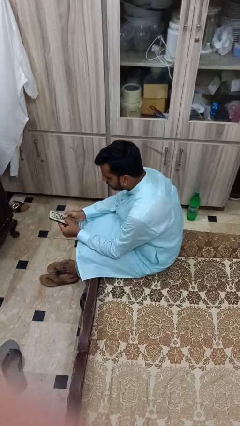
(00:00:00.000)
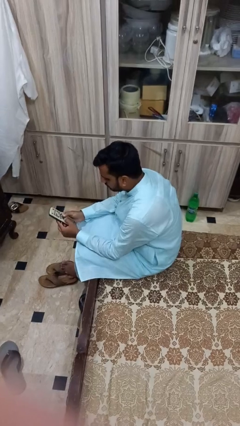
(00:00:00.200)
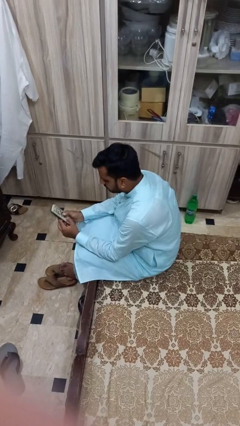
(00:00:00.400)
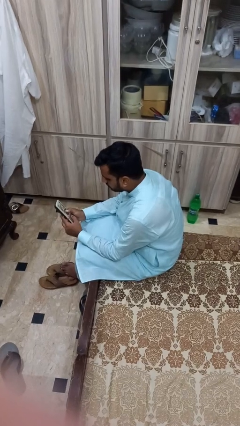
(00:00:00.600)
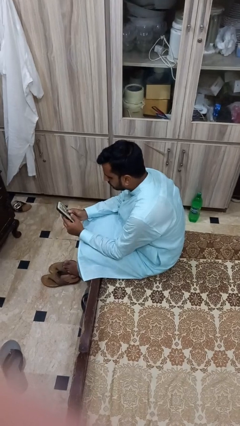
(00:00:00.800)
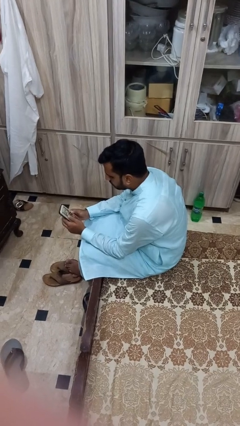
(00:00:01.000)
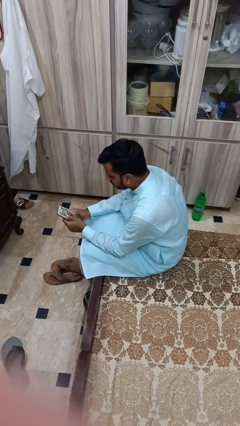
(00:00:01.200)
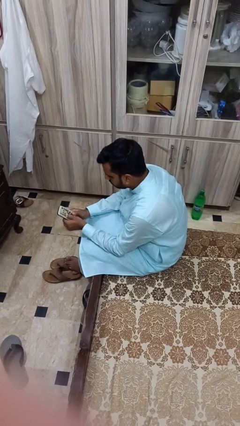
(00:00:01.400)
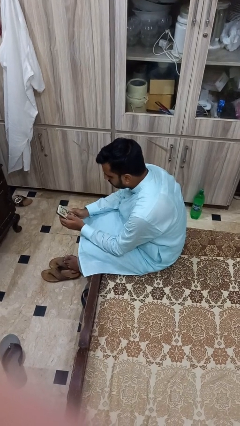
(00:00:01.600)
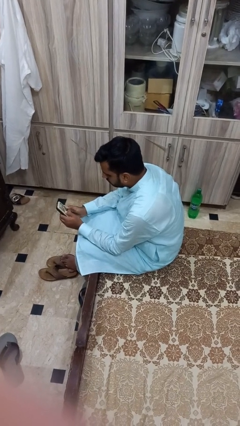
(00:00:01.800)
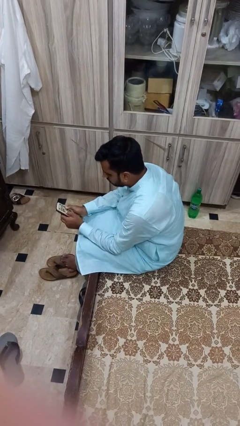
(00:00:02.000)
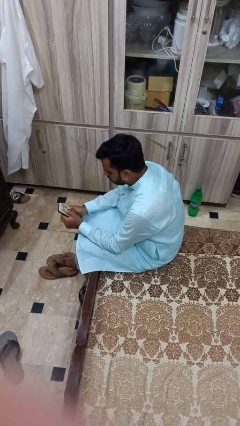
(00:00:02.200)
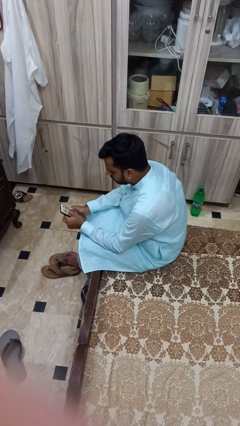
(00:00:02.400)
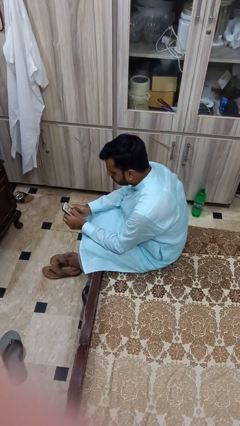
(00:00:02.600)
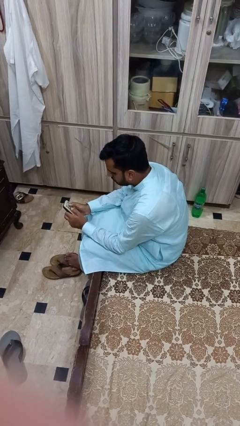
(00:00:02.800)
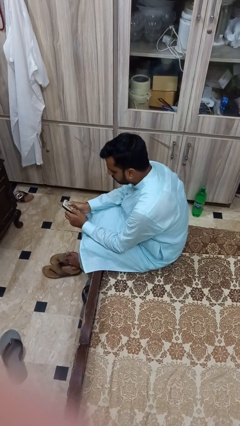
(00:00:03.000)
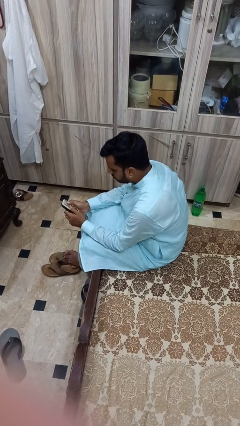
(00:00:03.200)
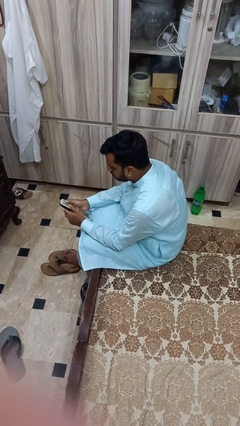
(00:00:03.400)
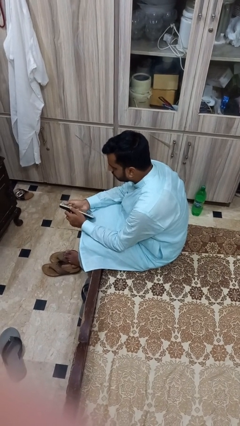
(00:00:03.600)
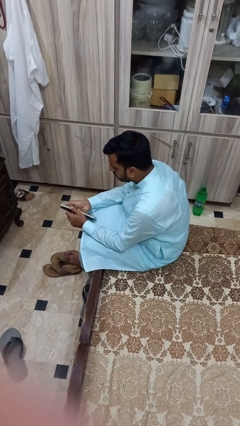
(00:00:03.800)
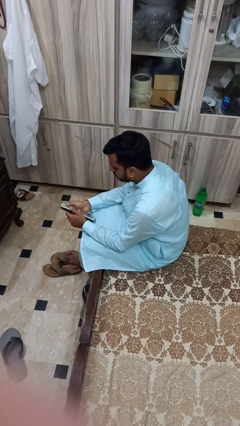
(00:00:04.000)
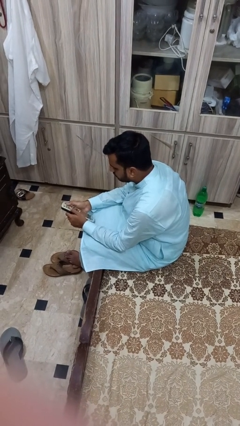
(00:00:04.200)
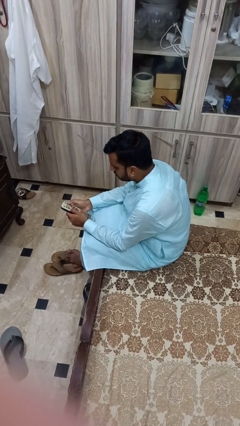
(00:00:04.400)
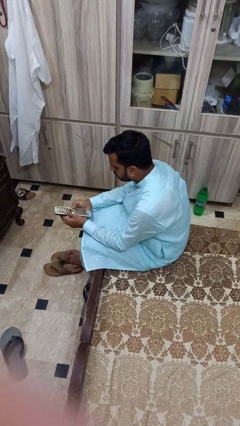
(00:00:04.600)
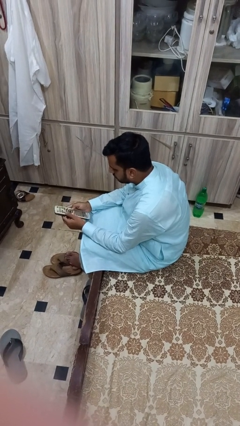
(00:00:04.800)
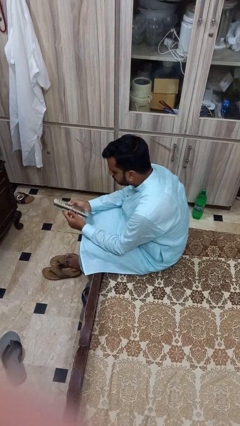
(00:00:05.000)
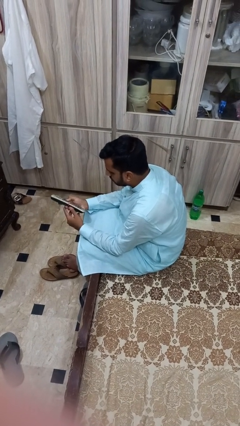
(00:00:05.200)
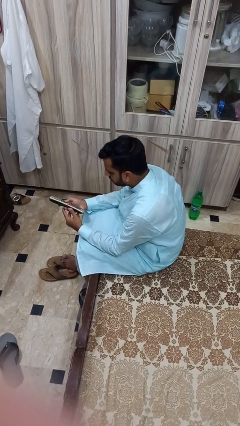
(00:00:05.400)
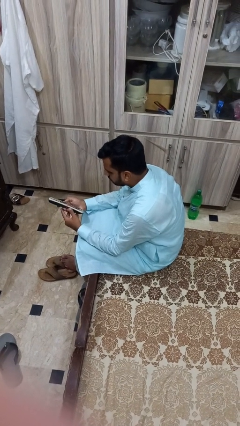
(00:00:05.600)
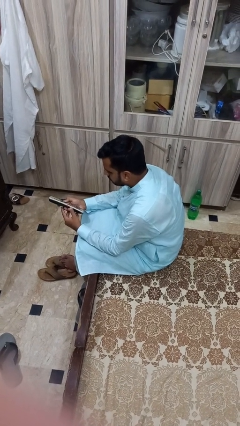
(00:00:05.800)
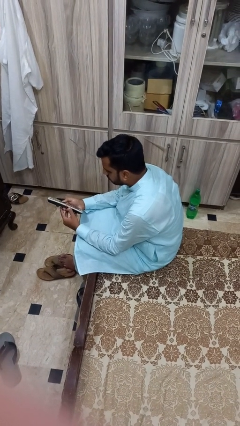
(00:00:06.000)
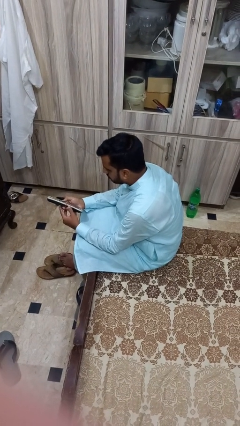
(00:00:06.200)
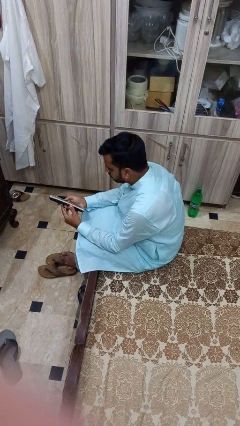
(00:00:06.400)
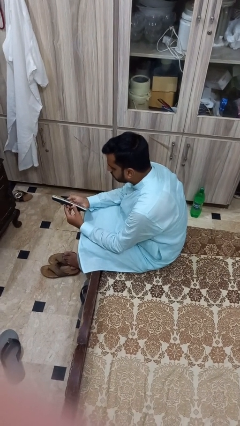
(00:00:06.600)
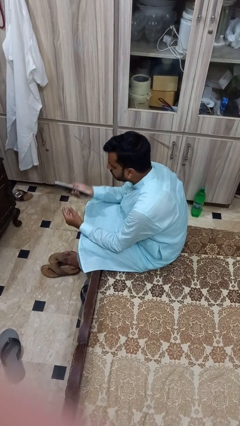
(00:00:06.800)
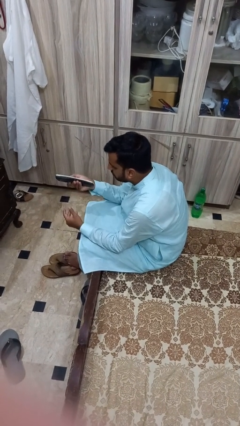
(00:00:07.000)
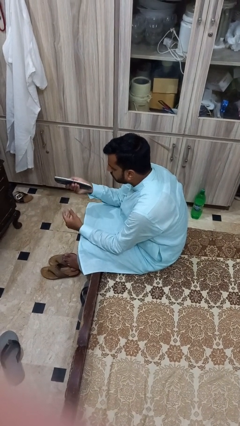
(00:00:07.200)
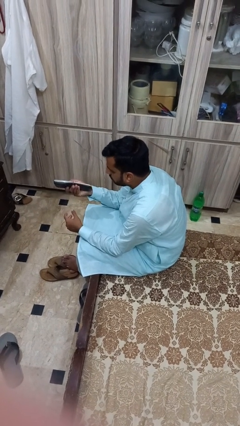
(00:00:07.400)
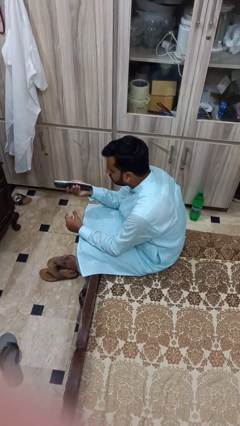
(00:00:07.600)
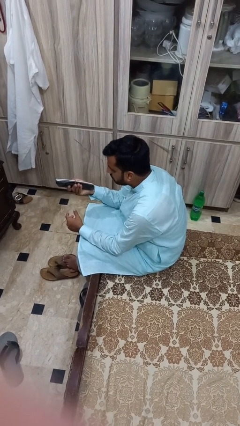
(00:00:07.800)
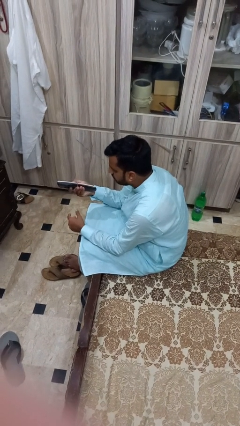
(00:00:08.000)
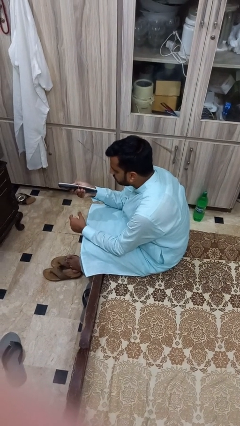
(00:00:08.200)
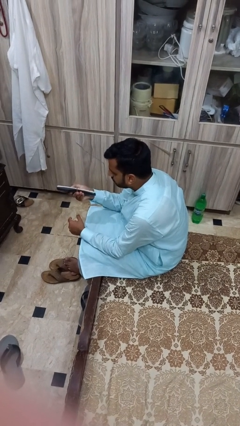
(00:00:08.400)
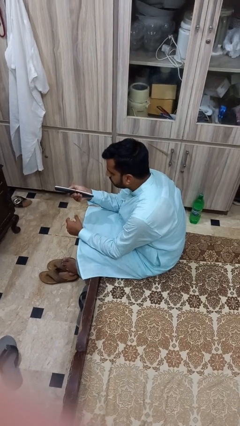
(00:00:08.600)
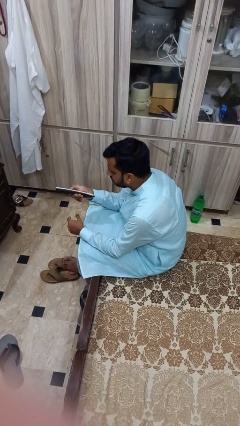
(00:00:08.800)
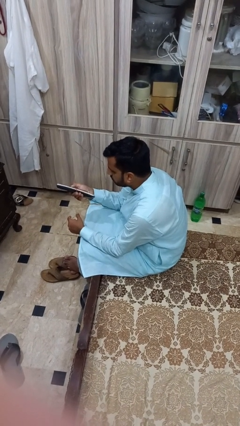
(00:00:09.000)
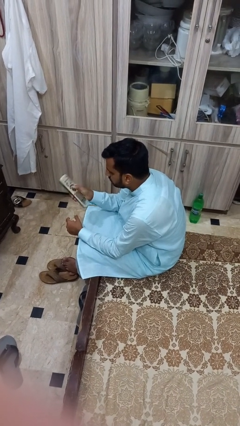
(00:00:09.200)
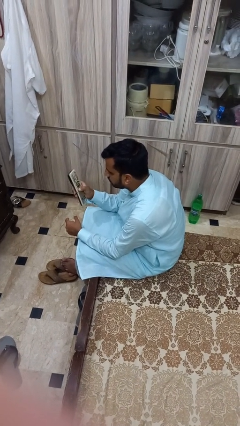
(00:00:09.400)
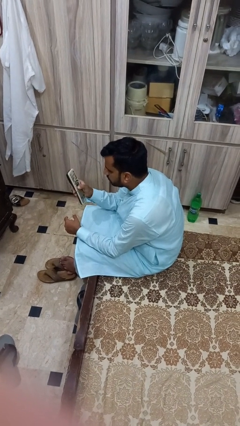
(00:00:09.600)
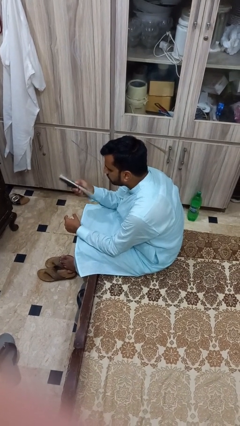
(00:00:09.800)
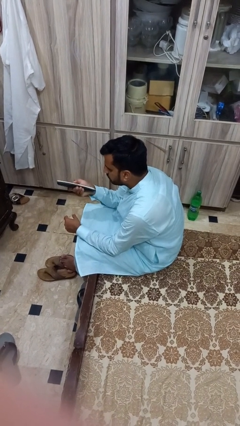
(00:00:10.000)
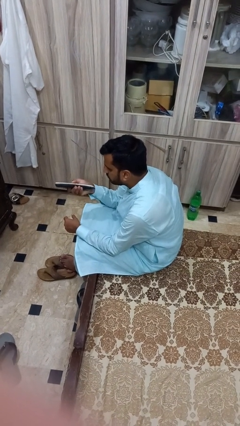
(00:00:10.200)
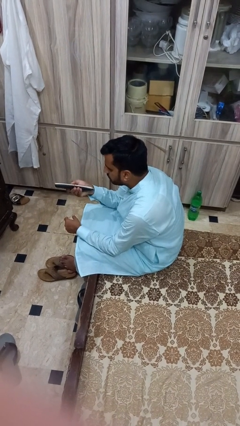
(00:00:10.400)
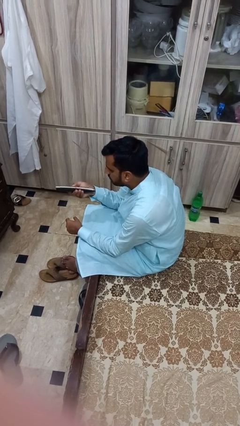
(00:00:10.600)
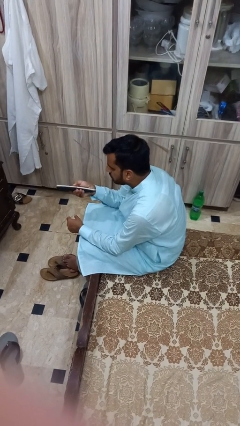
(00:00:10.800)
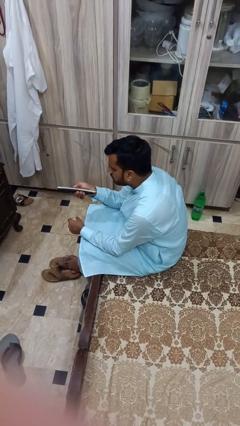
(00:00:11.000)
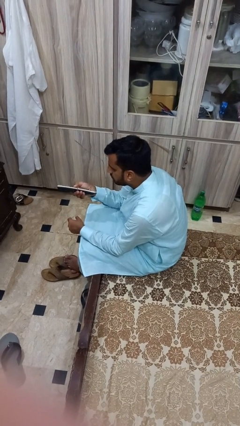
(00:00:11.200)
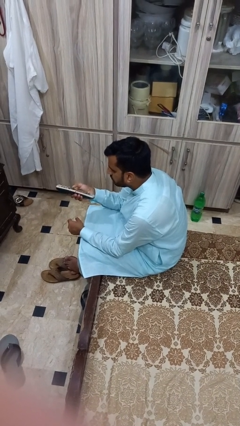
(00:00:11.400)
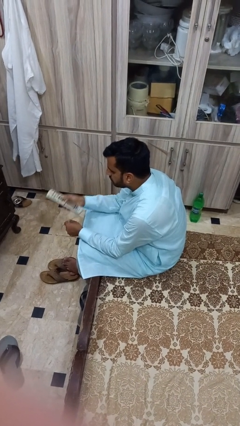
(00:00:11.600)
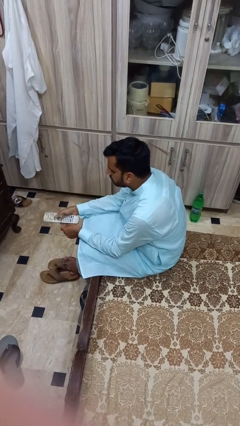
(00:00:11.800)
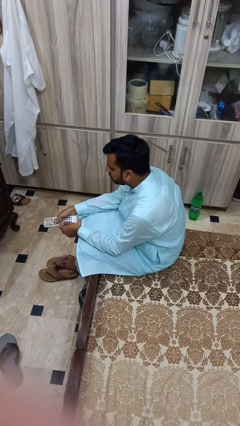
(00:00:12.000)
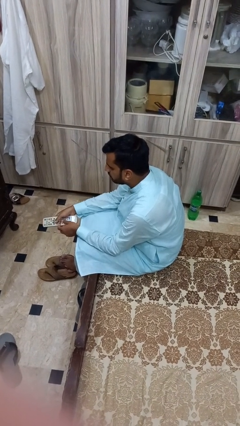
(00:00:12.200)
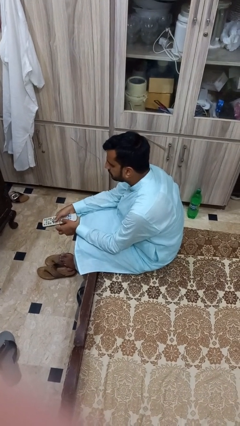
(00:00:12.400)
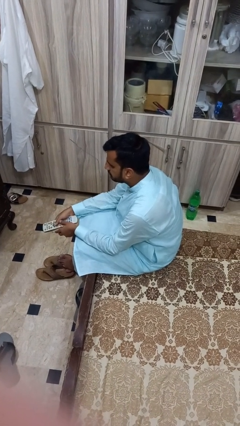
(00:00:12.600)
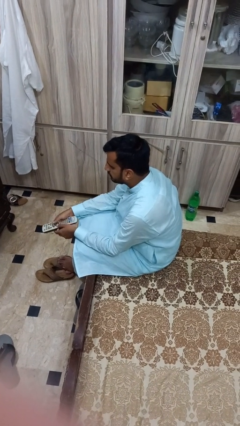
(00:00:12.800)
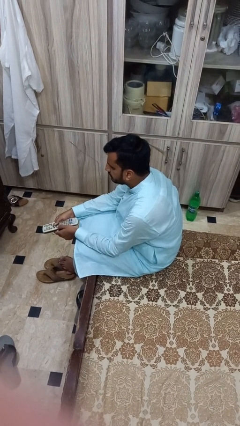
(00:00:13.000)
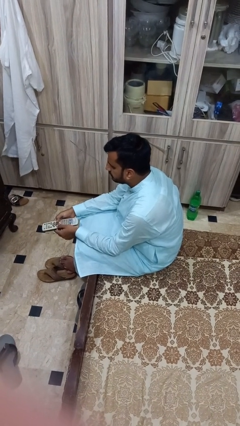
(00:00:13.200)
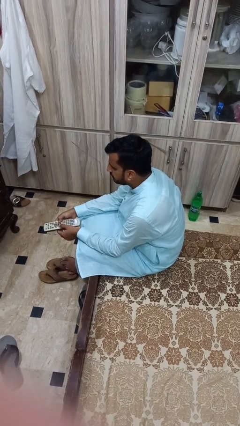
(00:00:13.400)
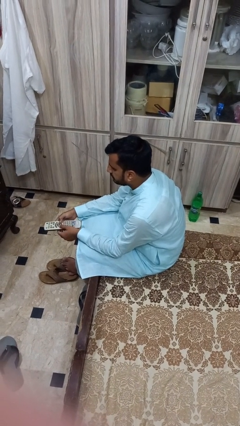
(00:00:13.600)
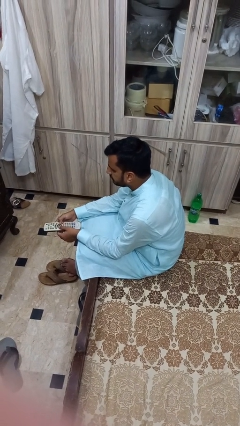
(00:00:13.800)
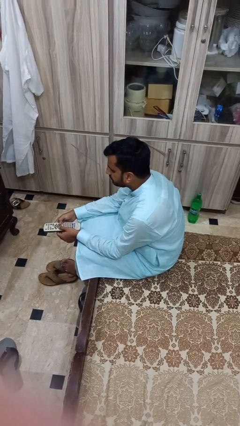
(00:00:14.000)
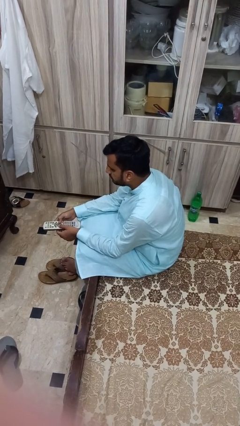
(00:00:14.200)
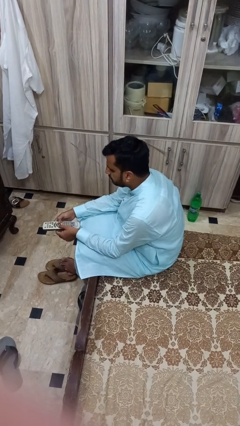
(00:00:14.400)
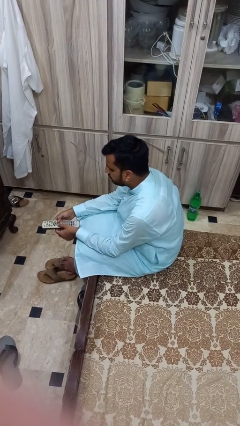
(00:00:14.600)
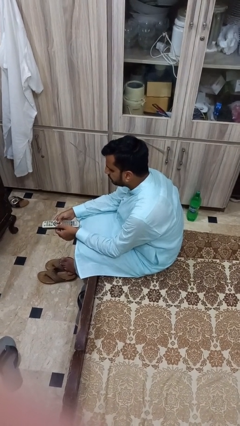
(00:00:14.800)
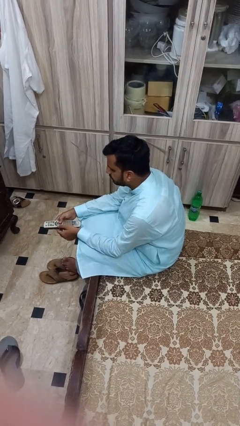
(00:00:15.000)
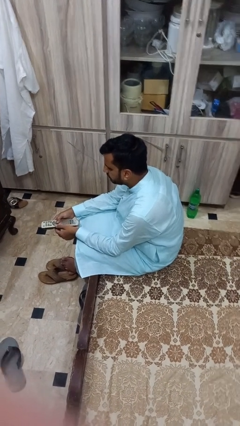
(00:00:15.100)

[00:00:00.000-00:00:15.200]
person uses television remote

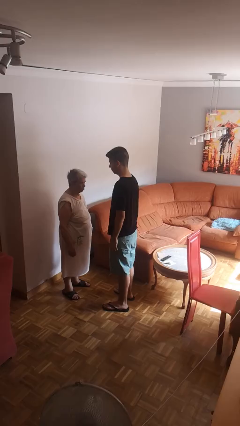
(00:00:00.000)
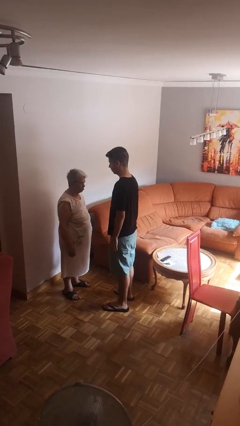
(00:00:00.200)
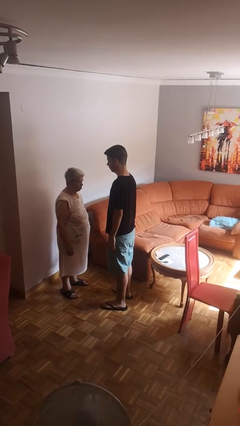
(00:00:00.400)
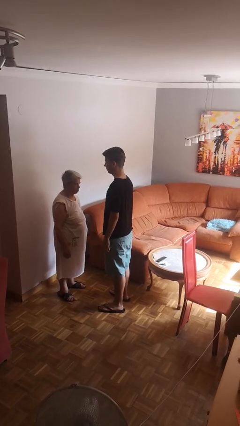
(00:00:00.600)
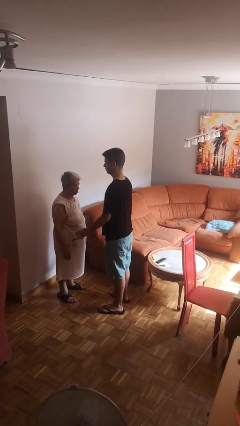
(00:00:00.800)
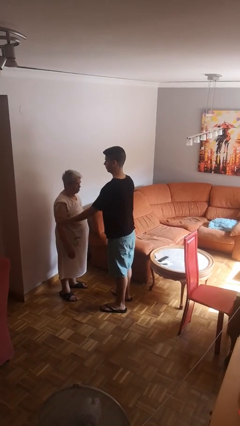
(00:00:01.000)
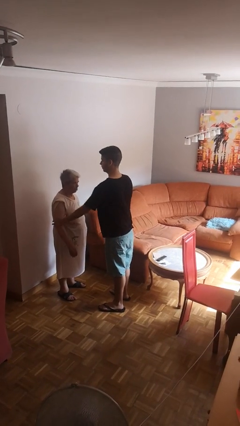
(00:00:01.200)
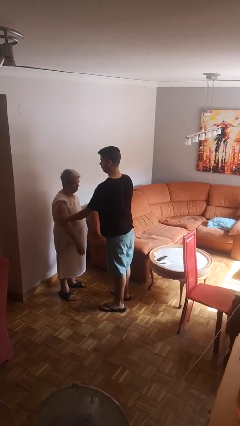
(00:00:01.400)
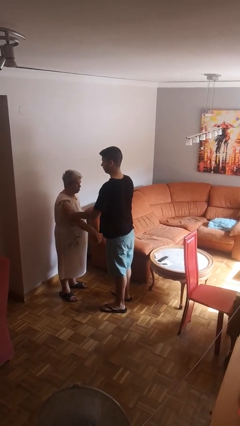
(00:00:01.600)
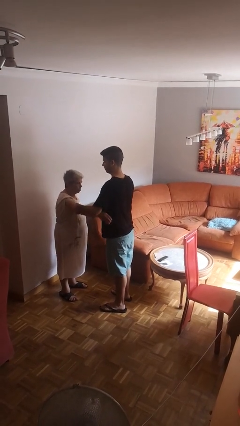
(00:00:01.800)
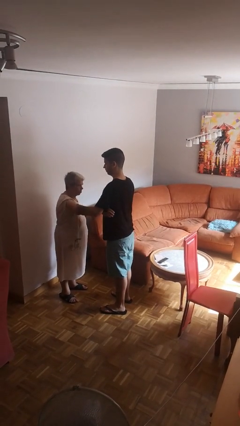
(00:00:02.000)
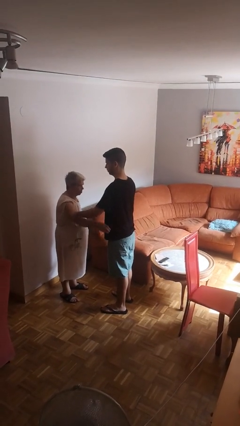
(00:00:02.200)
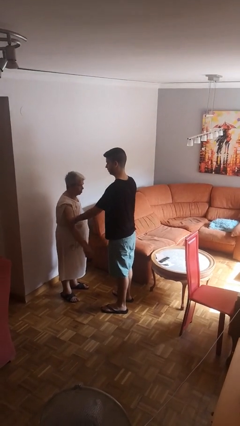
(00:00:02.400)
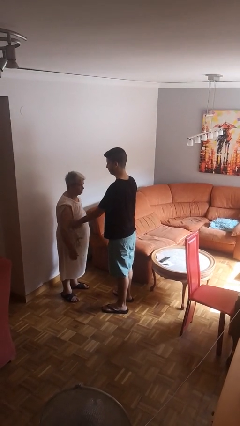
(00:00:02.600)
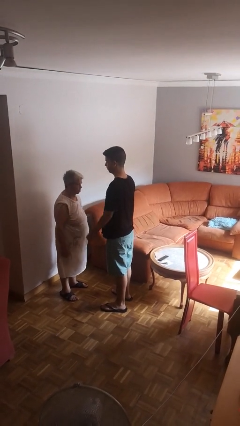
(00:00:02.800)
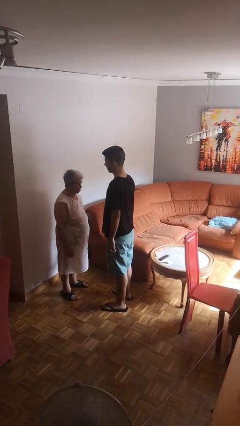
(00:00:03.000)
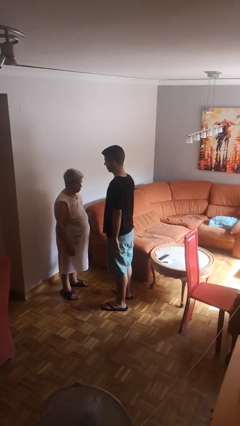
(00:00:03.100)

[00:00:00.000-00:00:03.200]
person grabs person by bicep
